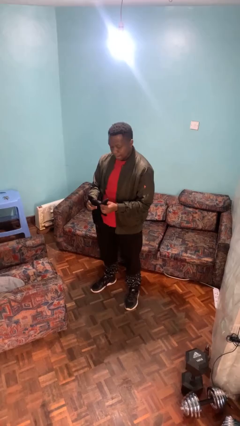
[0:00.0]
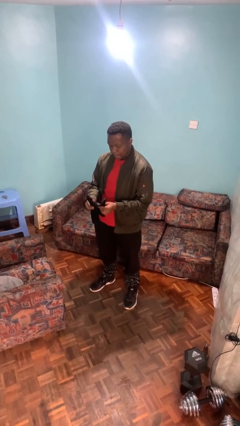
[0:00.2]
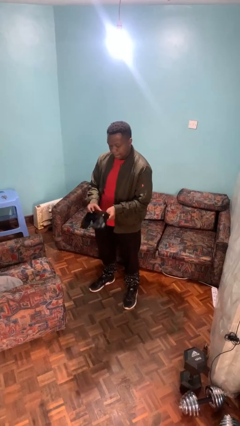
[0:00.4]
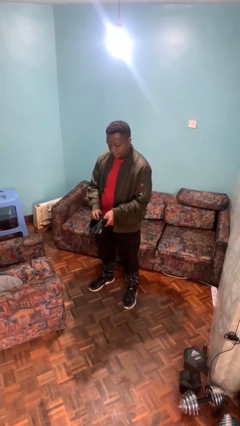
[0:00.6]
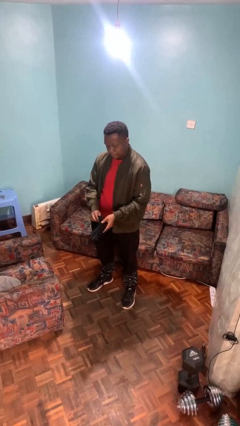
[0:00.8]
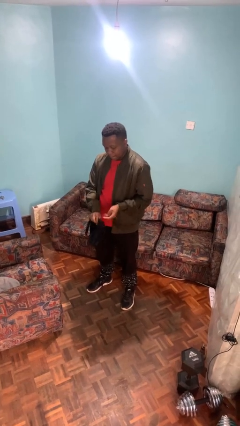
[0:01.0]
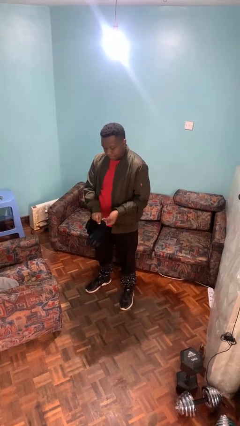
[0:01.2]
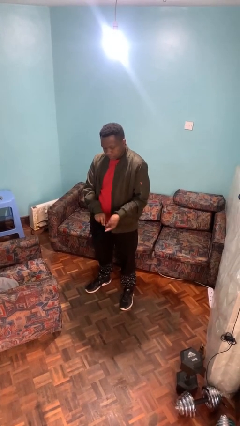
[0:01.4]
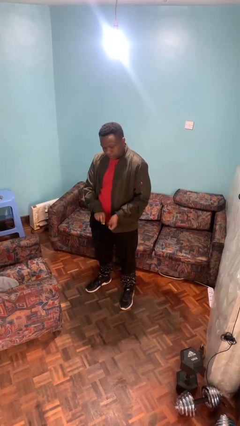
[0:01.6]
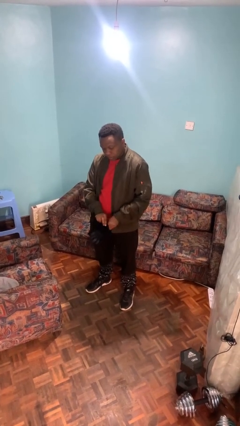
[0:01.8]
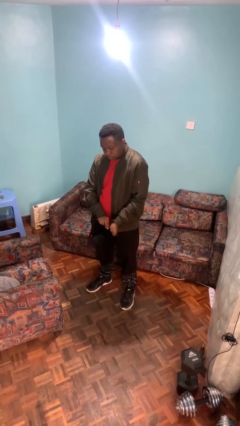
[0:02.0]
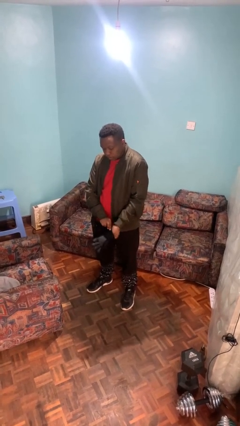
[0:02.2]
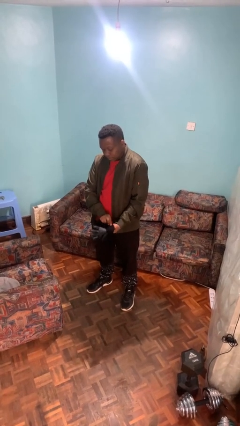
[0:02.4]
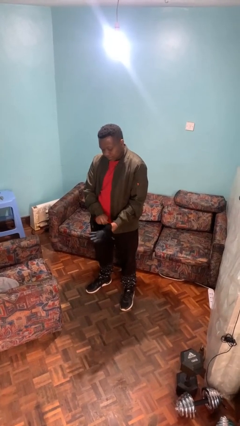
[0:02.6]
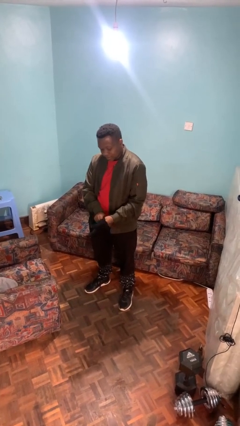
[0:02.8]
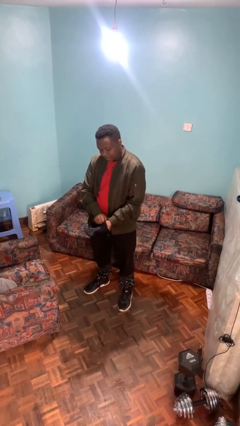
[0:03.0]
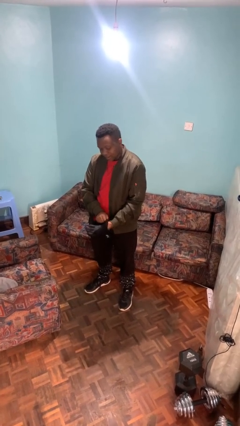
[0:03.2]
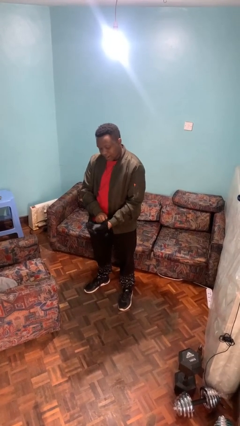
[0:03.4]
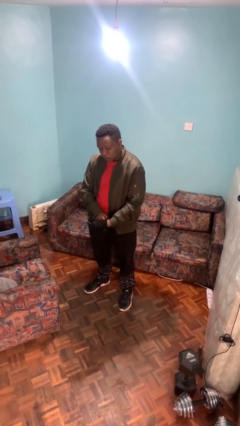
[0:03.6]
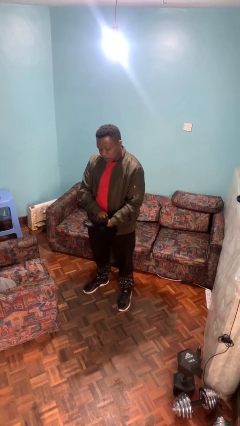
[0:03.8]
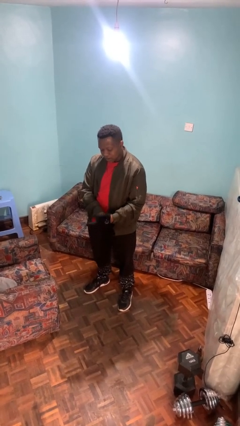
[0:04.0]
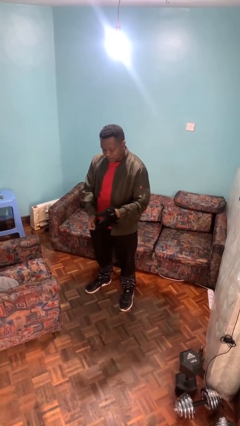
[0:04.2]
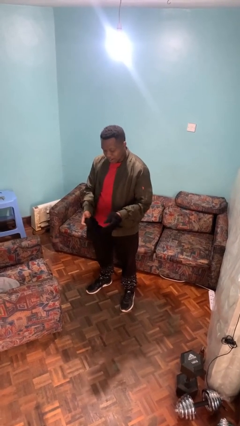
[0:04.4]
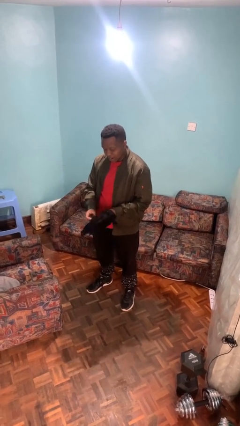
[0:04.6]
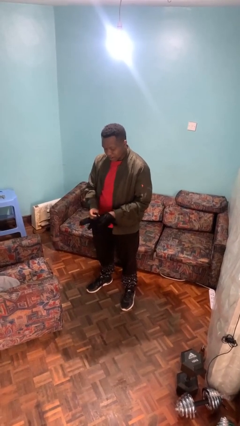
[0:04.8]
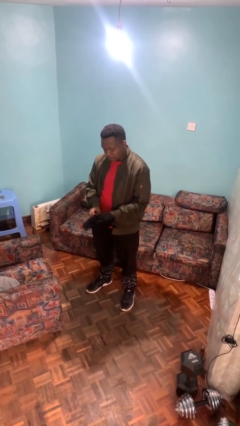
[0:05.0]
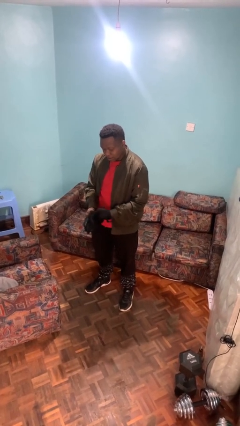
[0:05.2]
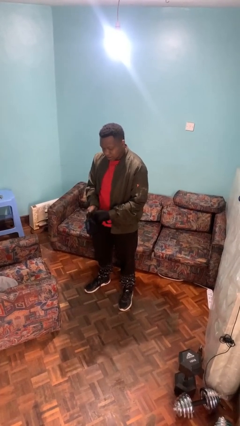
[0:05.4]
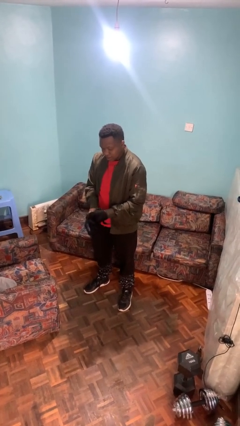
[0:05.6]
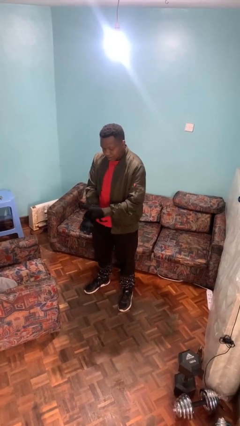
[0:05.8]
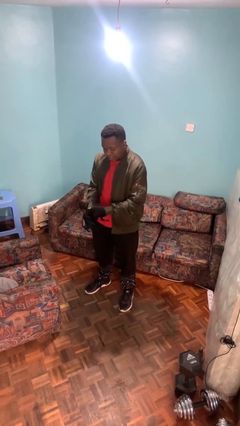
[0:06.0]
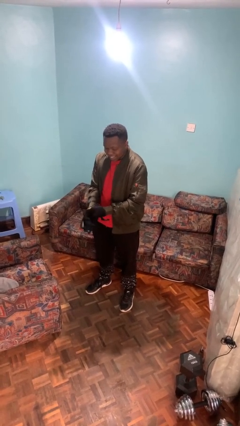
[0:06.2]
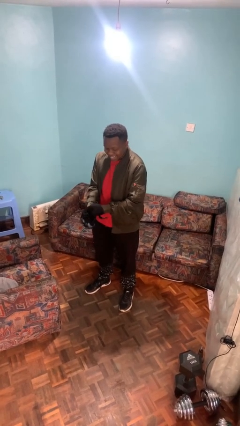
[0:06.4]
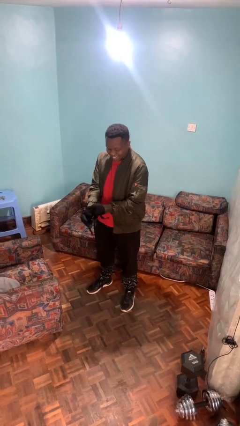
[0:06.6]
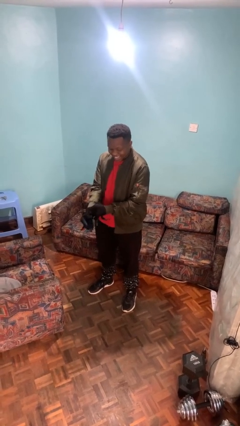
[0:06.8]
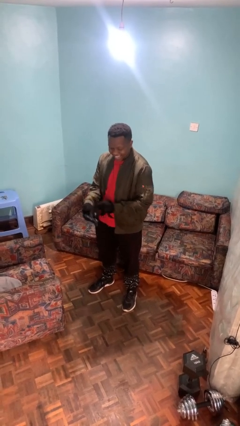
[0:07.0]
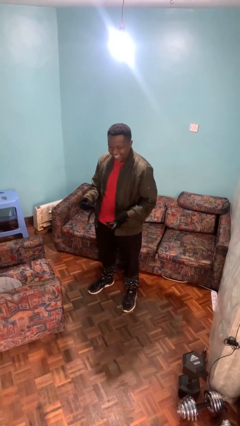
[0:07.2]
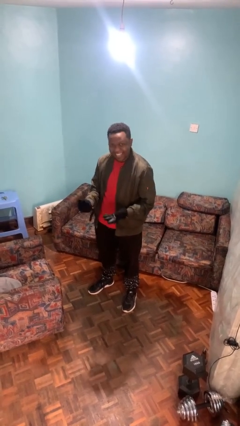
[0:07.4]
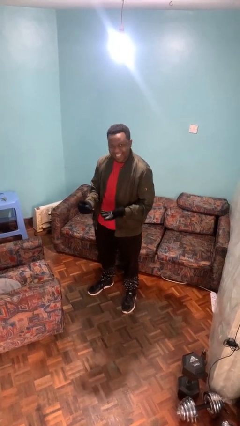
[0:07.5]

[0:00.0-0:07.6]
person puts on gloves

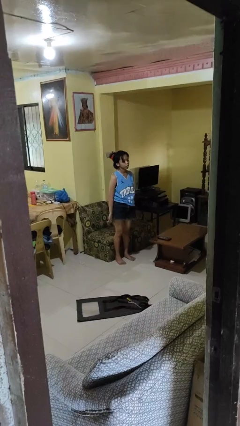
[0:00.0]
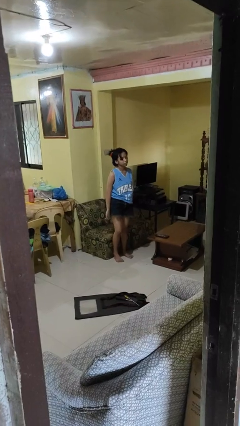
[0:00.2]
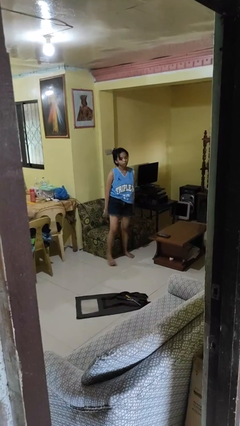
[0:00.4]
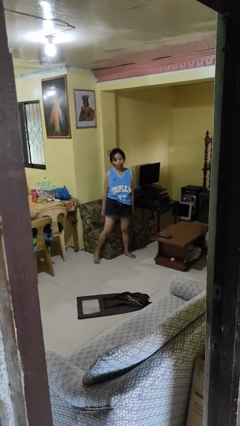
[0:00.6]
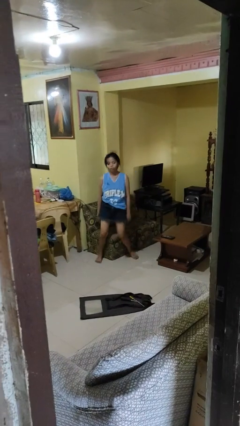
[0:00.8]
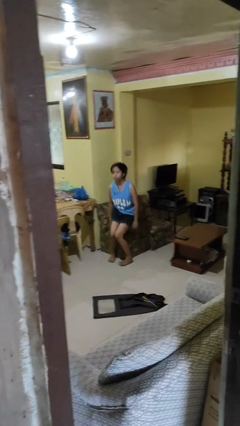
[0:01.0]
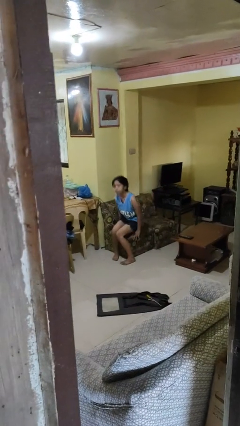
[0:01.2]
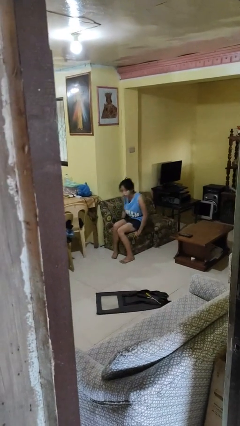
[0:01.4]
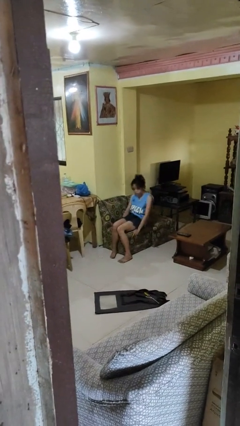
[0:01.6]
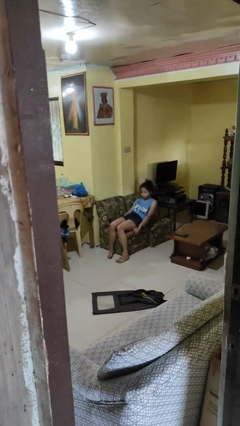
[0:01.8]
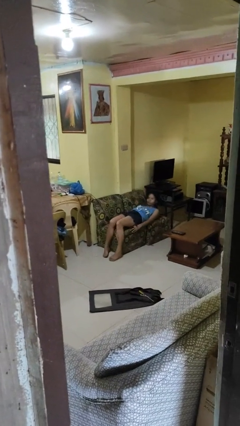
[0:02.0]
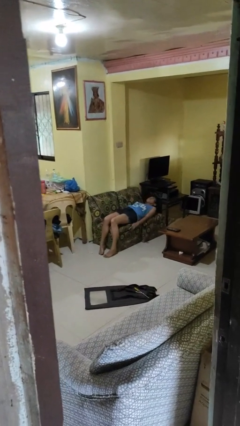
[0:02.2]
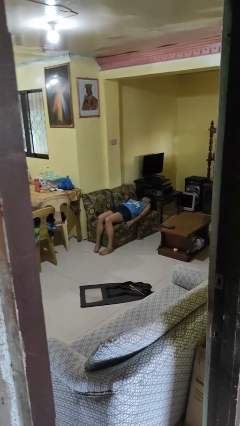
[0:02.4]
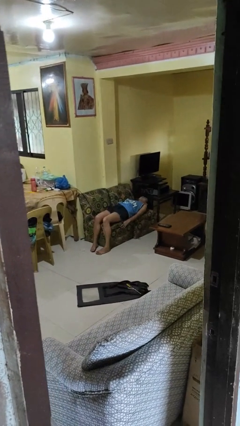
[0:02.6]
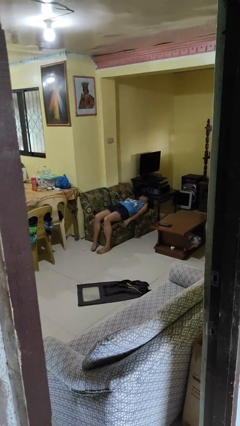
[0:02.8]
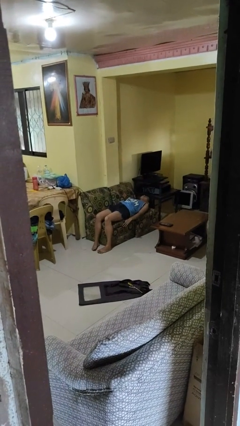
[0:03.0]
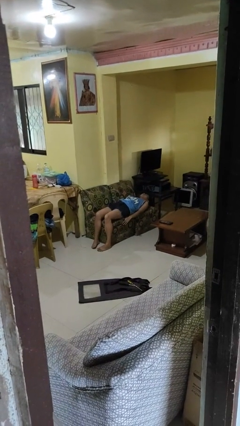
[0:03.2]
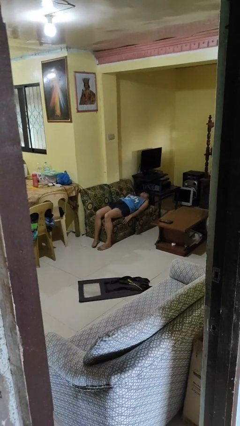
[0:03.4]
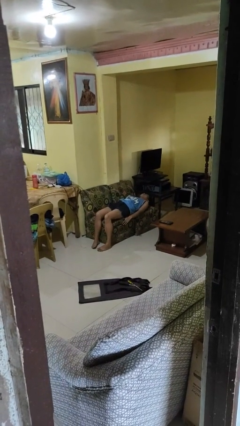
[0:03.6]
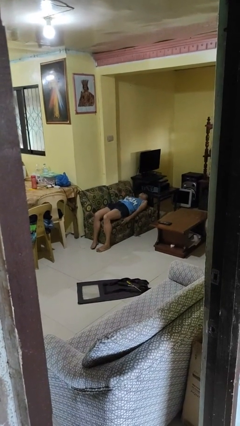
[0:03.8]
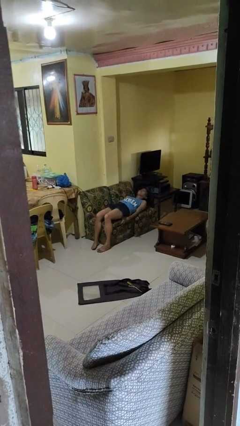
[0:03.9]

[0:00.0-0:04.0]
person lies down on couch

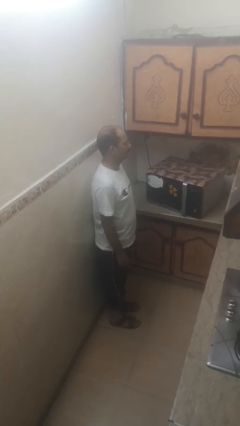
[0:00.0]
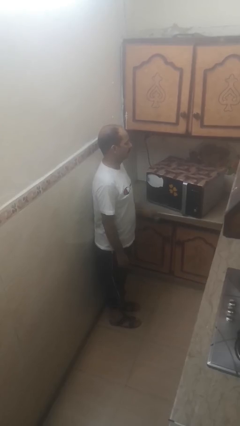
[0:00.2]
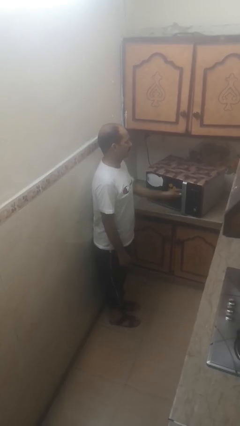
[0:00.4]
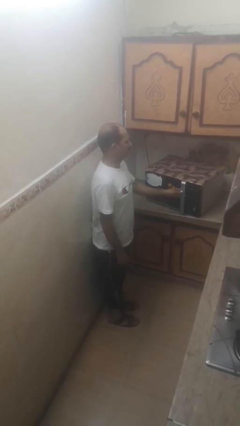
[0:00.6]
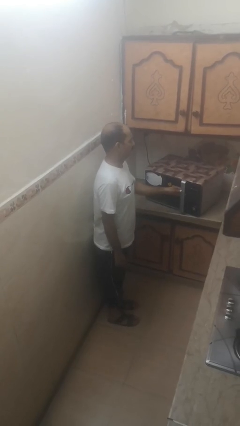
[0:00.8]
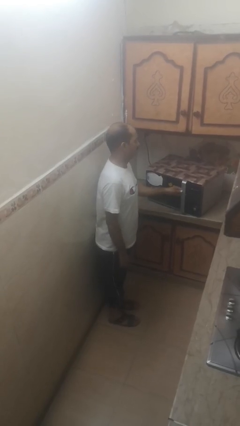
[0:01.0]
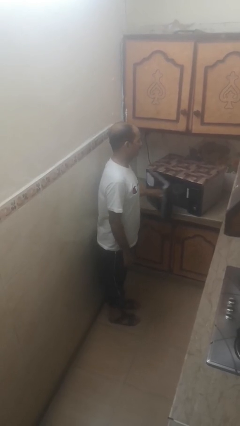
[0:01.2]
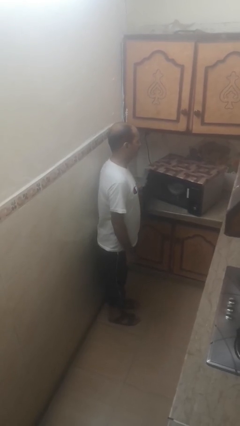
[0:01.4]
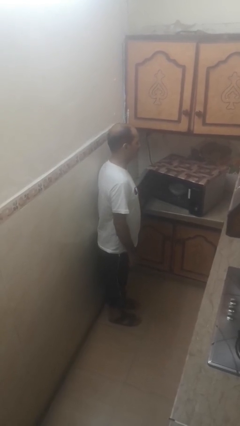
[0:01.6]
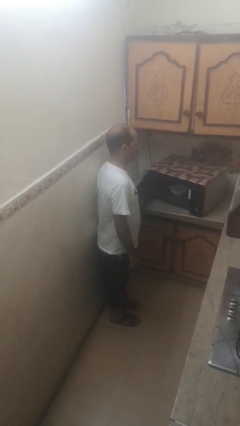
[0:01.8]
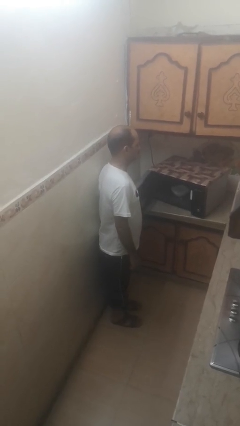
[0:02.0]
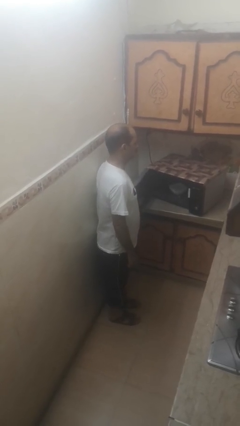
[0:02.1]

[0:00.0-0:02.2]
person opens microwave

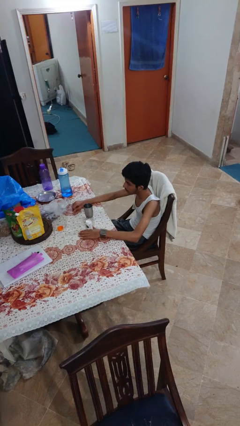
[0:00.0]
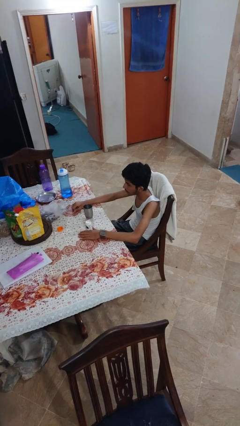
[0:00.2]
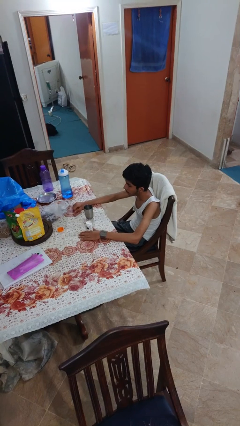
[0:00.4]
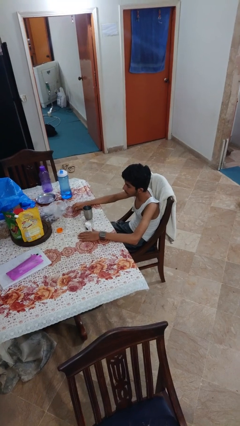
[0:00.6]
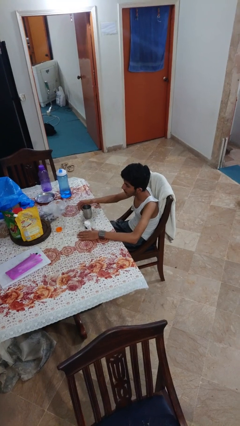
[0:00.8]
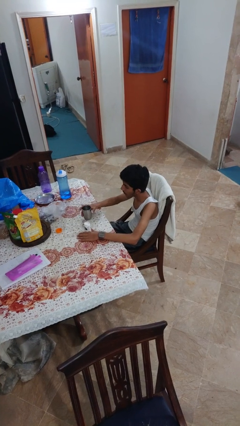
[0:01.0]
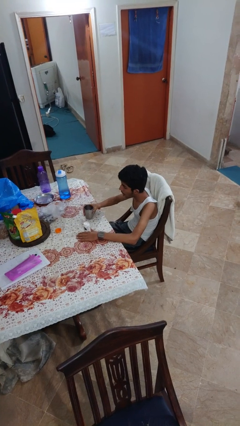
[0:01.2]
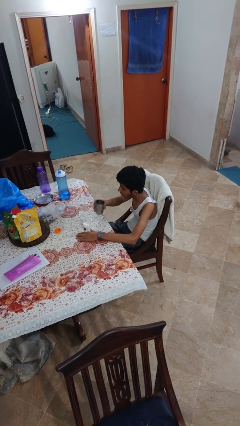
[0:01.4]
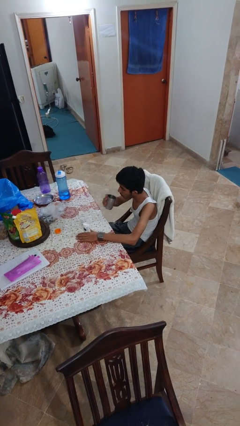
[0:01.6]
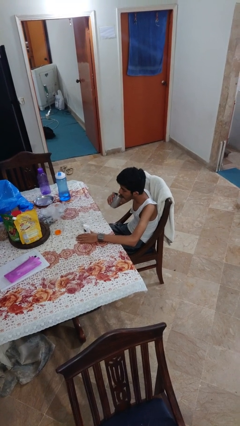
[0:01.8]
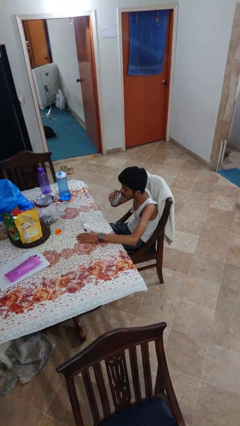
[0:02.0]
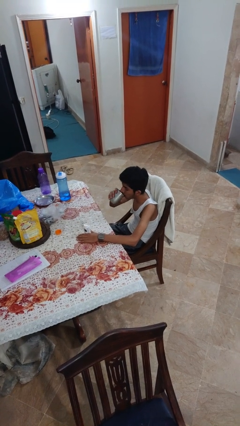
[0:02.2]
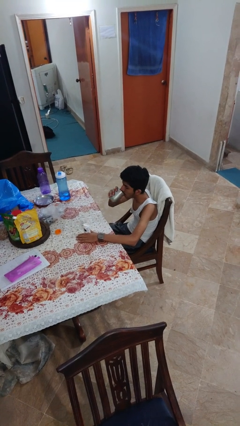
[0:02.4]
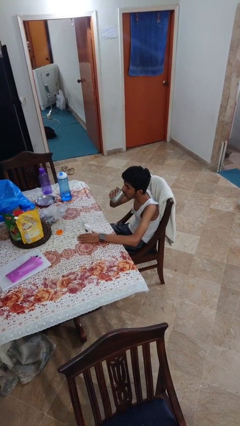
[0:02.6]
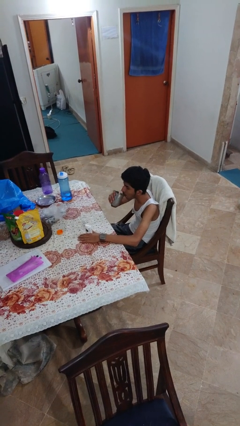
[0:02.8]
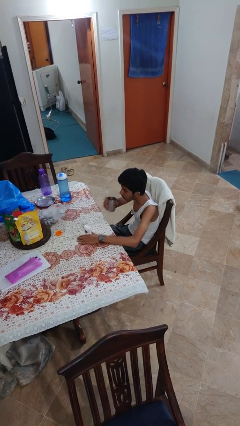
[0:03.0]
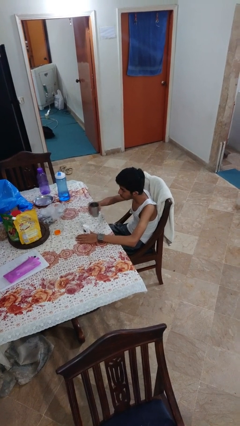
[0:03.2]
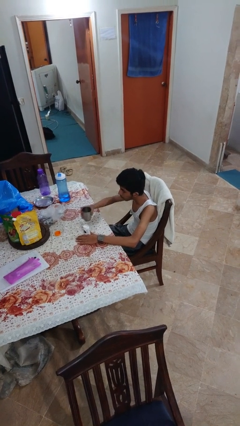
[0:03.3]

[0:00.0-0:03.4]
person drinks from cup

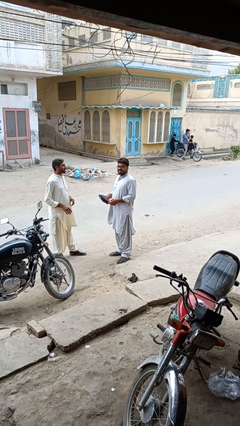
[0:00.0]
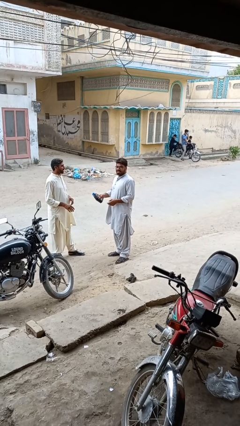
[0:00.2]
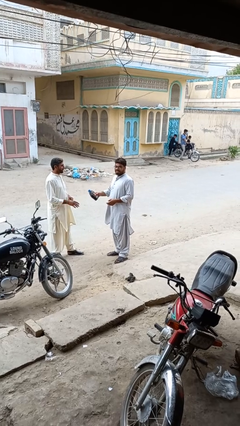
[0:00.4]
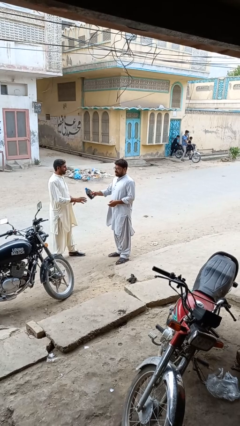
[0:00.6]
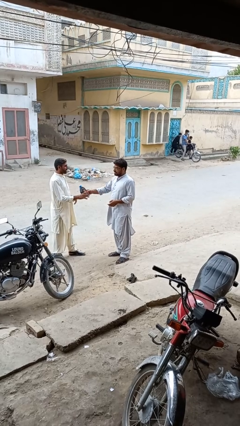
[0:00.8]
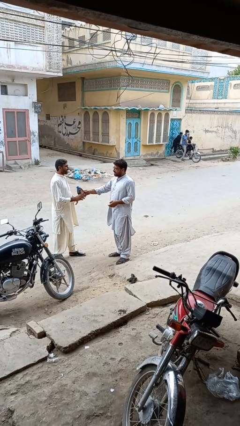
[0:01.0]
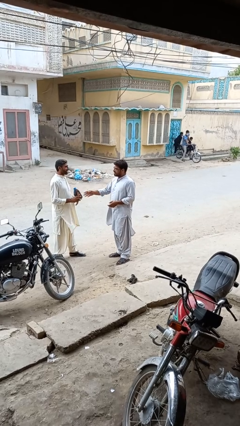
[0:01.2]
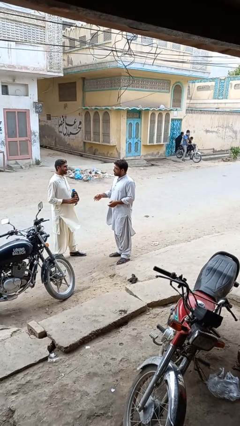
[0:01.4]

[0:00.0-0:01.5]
person transfers object to person
